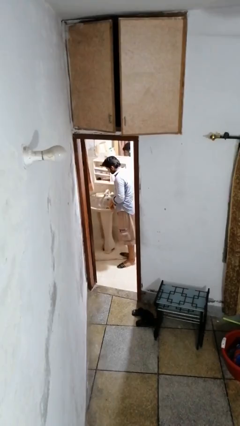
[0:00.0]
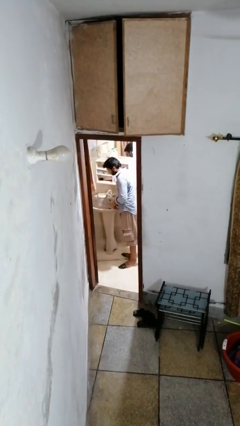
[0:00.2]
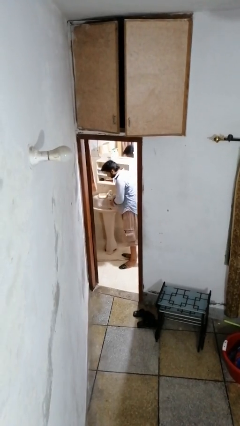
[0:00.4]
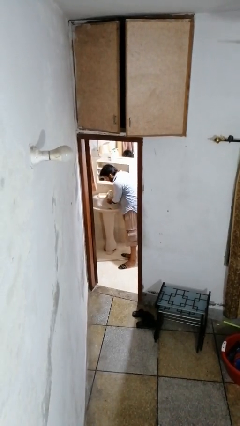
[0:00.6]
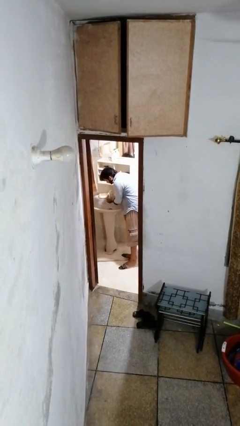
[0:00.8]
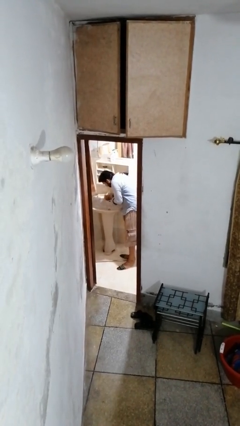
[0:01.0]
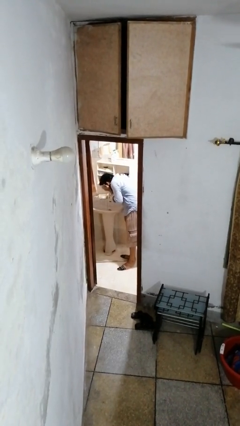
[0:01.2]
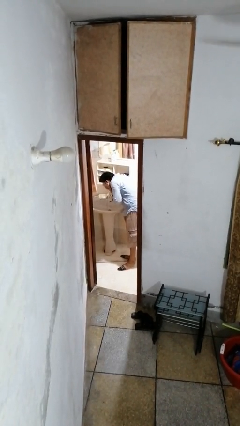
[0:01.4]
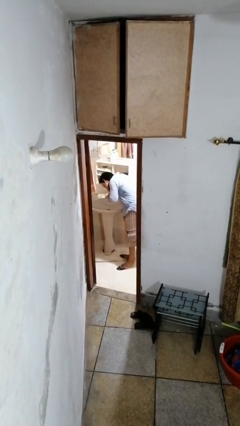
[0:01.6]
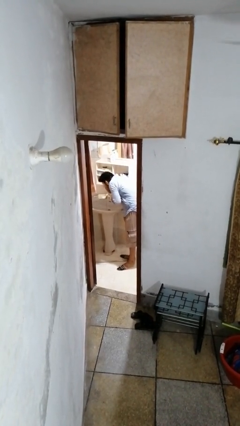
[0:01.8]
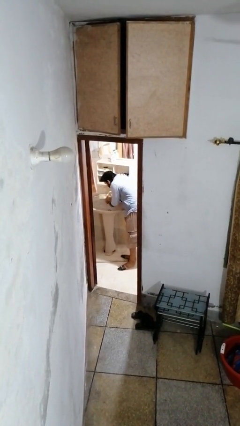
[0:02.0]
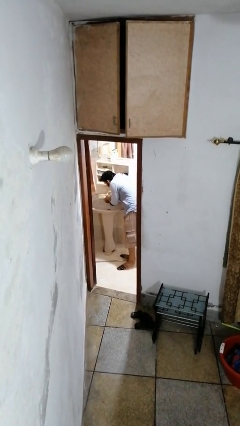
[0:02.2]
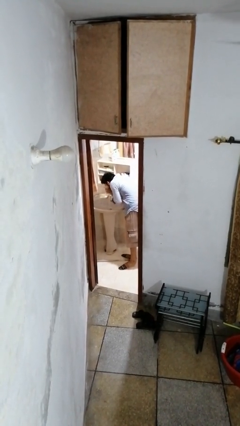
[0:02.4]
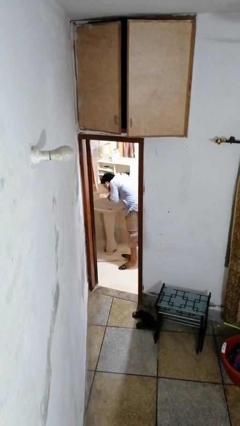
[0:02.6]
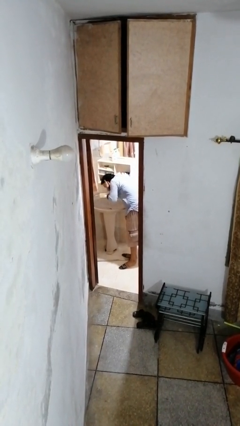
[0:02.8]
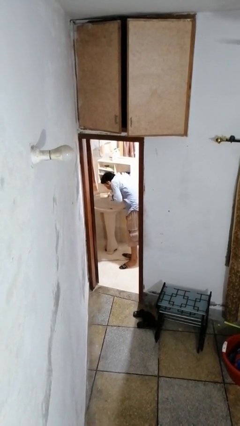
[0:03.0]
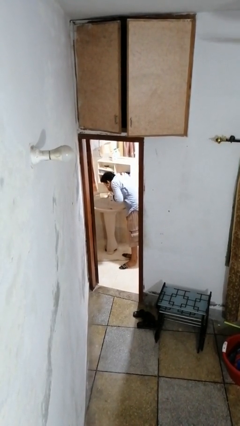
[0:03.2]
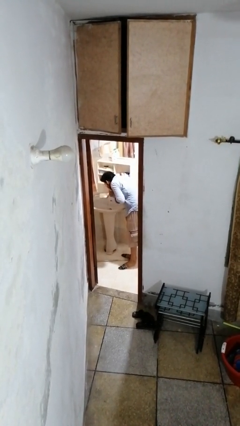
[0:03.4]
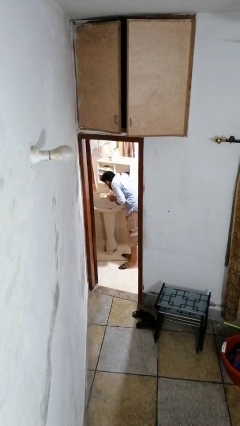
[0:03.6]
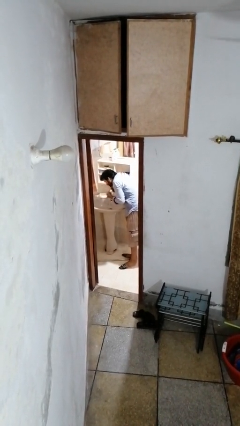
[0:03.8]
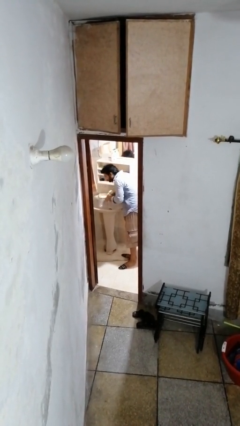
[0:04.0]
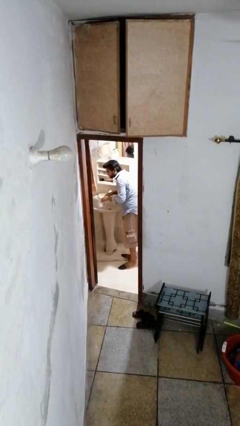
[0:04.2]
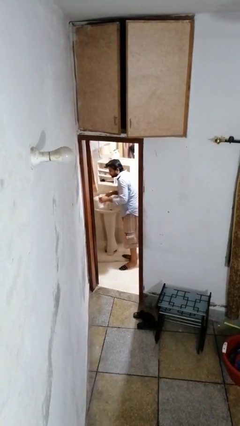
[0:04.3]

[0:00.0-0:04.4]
person washes face

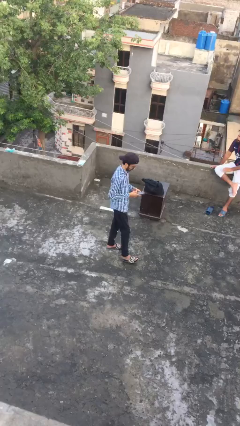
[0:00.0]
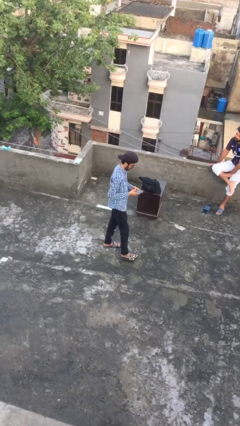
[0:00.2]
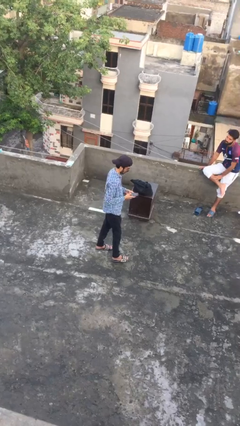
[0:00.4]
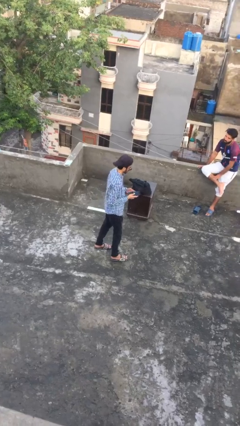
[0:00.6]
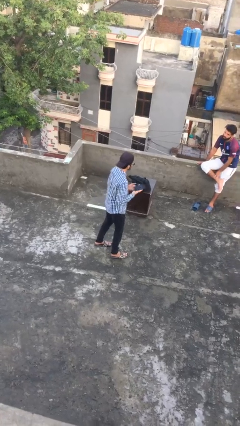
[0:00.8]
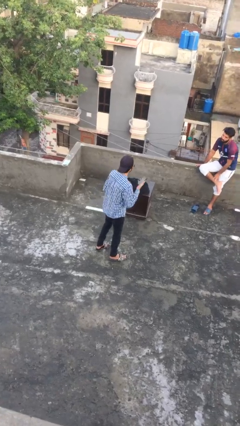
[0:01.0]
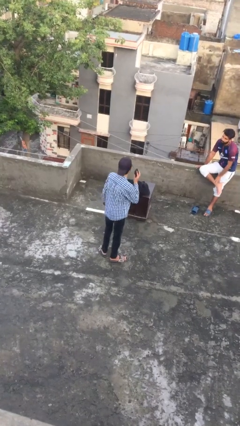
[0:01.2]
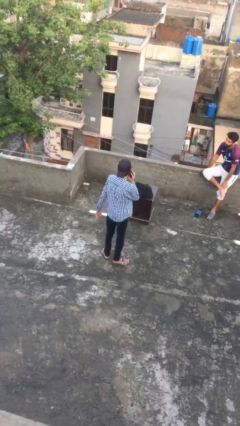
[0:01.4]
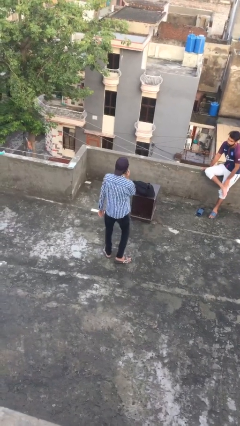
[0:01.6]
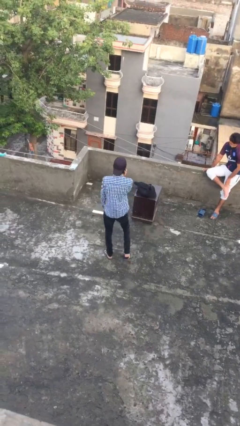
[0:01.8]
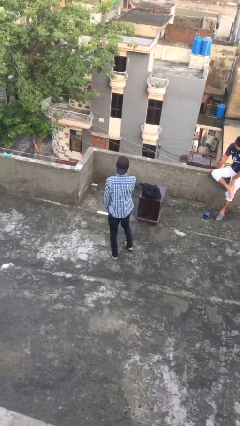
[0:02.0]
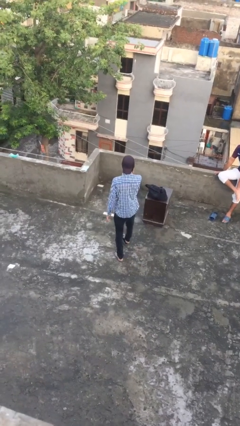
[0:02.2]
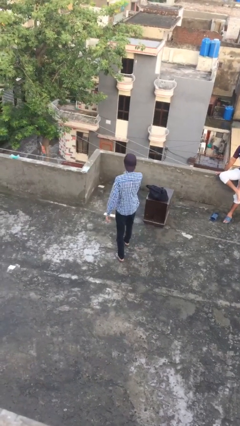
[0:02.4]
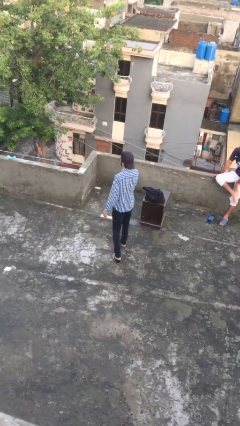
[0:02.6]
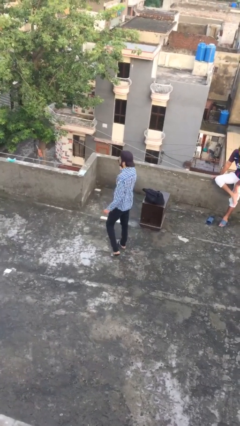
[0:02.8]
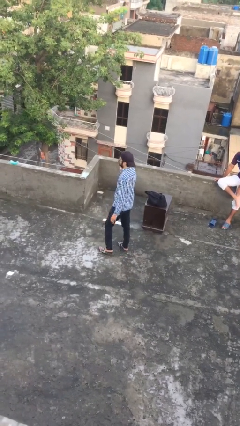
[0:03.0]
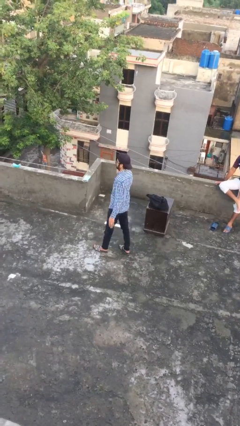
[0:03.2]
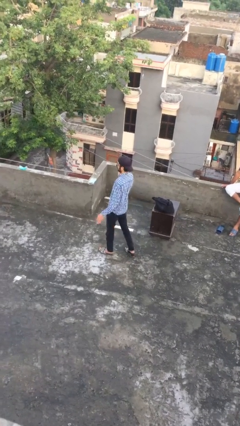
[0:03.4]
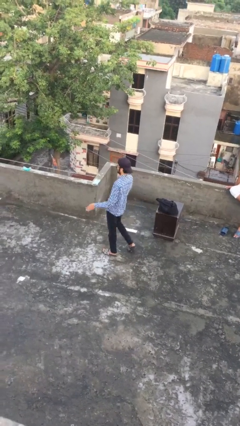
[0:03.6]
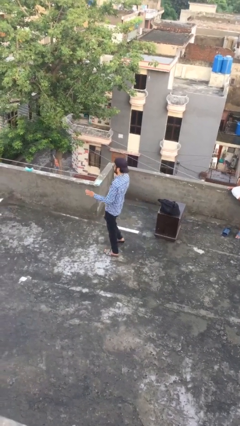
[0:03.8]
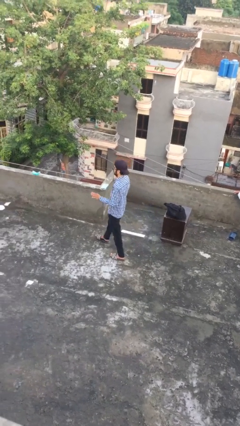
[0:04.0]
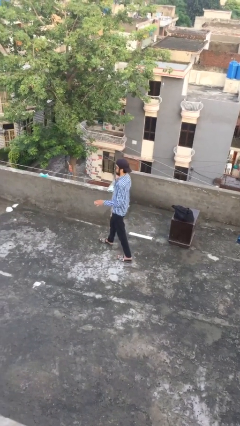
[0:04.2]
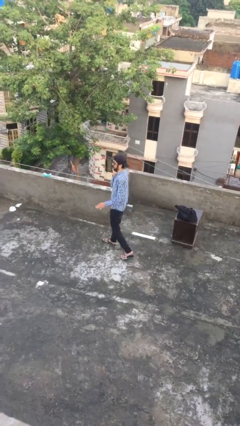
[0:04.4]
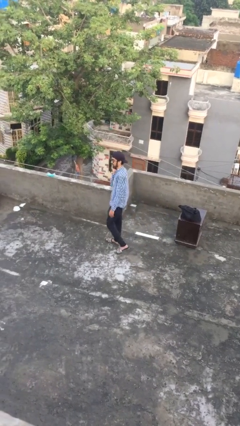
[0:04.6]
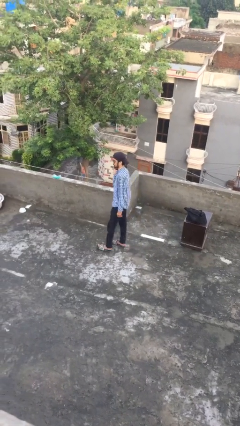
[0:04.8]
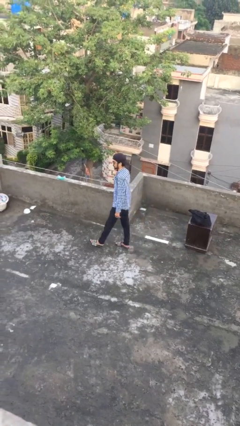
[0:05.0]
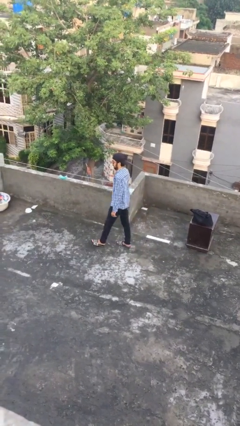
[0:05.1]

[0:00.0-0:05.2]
person talks on phone

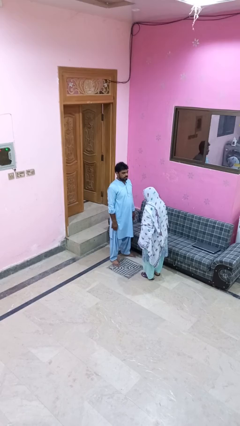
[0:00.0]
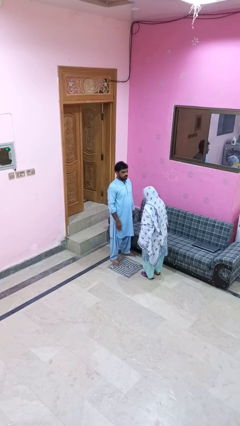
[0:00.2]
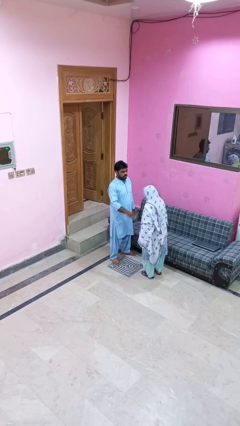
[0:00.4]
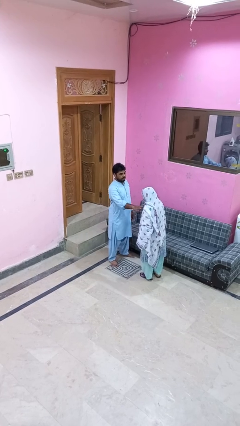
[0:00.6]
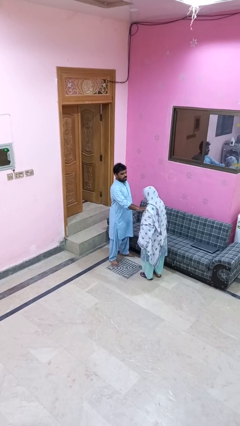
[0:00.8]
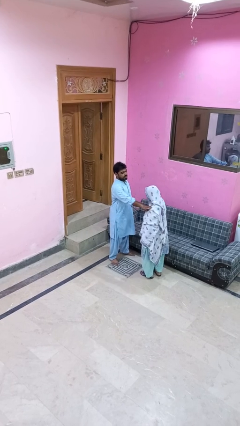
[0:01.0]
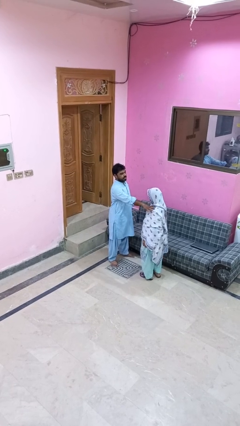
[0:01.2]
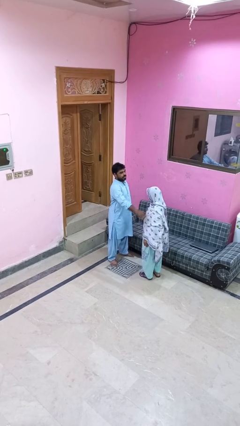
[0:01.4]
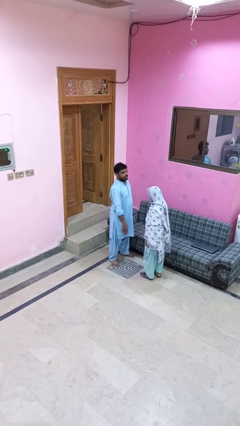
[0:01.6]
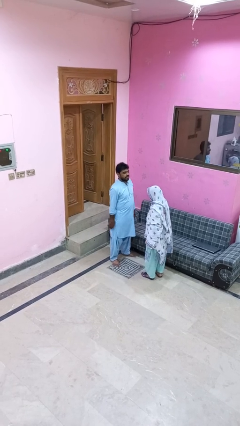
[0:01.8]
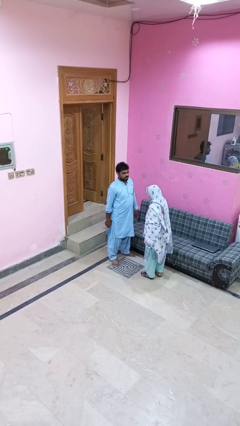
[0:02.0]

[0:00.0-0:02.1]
person shoves person

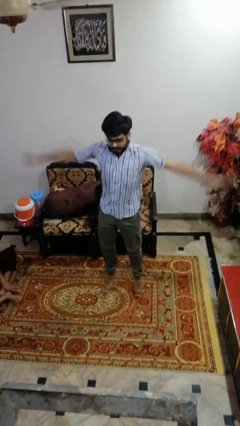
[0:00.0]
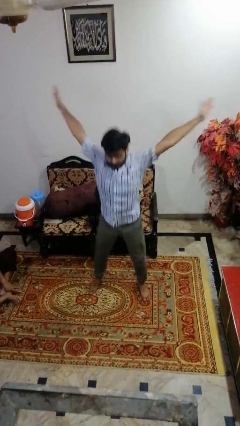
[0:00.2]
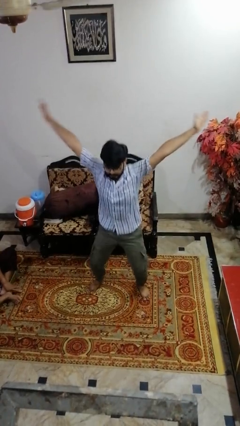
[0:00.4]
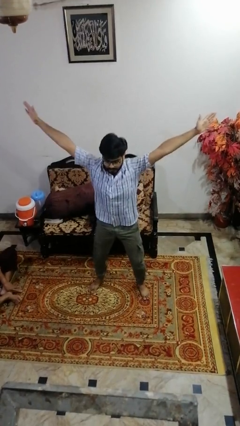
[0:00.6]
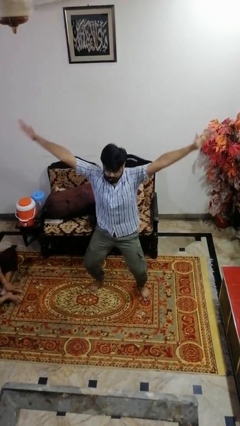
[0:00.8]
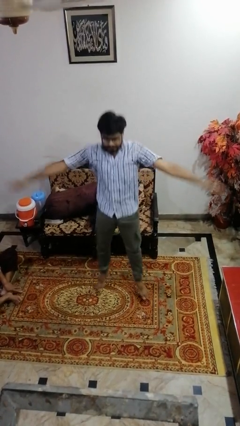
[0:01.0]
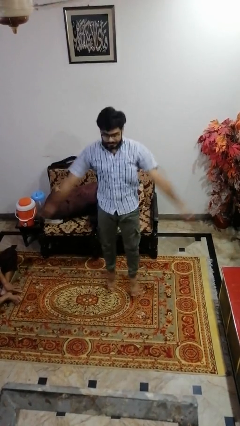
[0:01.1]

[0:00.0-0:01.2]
person exercises with jumping jacks

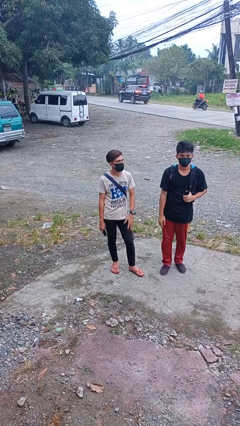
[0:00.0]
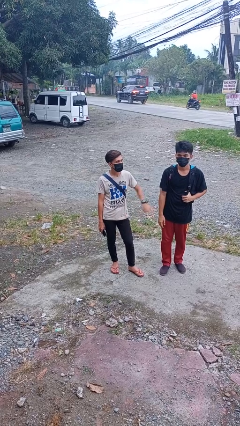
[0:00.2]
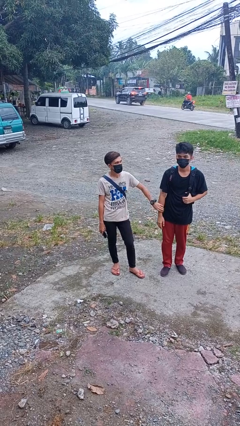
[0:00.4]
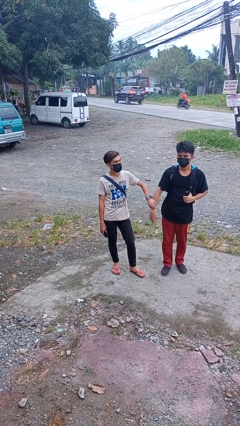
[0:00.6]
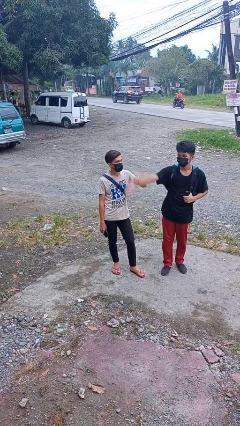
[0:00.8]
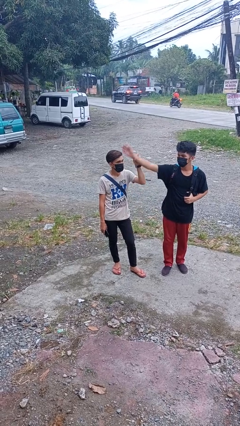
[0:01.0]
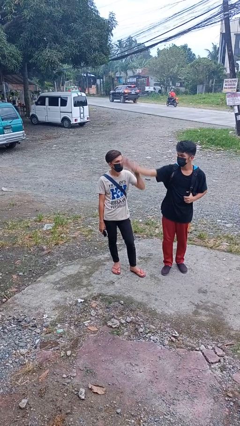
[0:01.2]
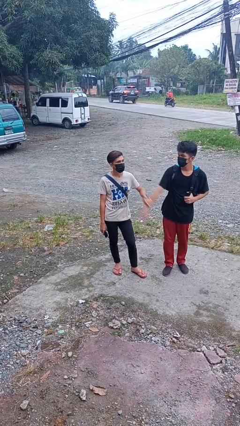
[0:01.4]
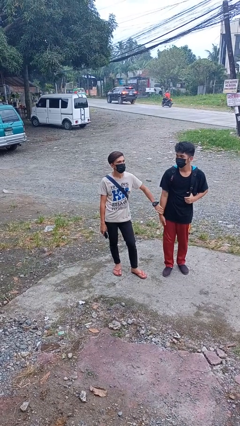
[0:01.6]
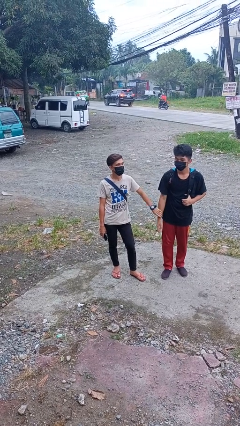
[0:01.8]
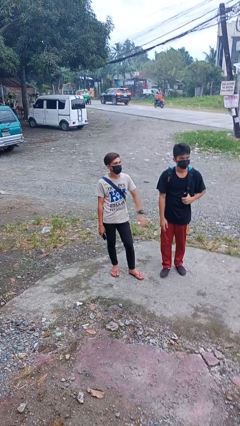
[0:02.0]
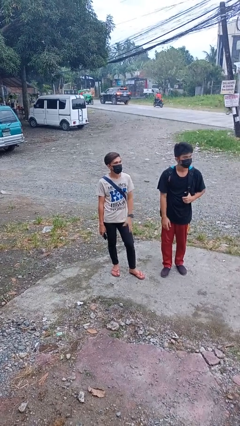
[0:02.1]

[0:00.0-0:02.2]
person grabs person by forearm

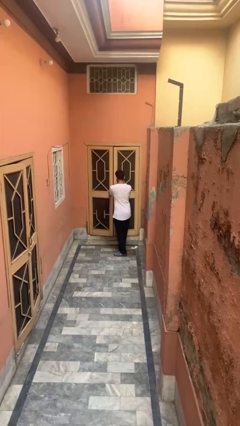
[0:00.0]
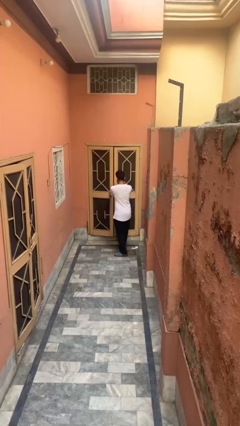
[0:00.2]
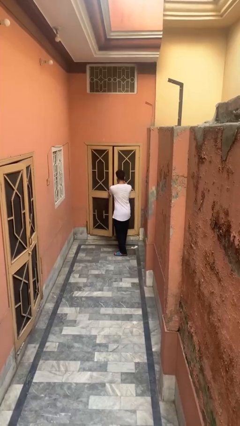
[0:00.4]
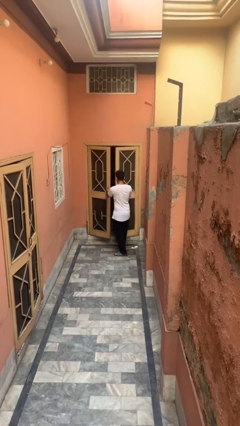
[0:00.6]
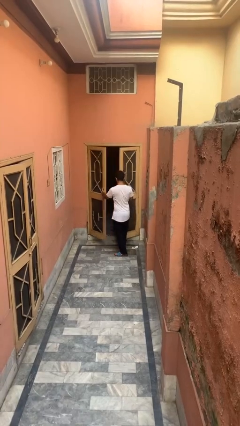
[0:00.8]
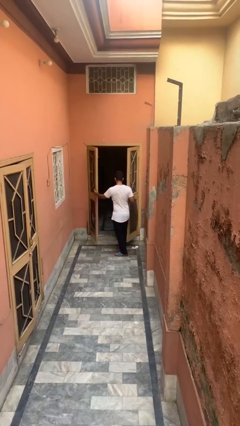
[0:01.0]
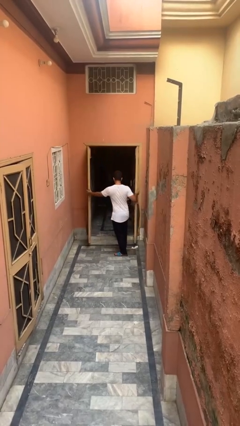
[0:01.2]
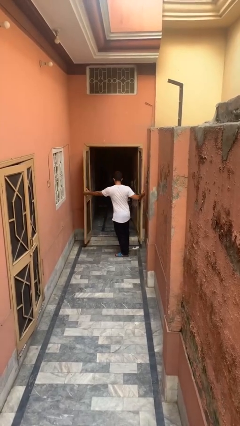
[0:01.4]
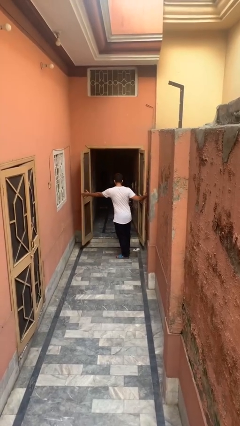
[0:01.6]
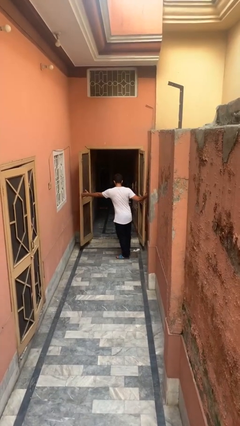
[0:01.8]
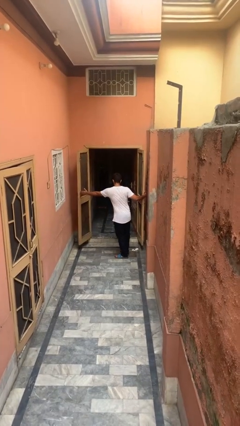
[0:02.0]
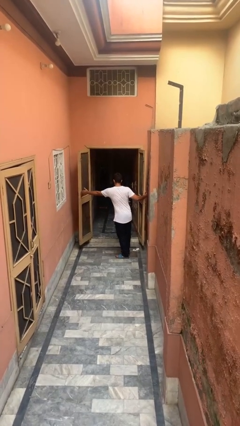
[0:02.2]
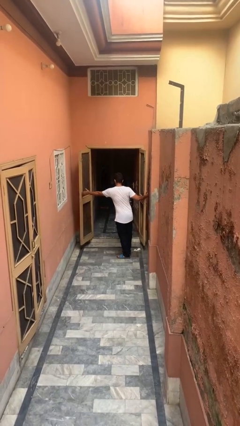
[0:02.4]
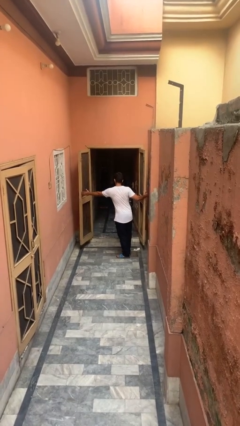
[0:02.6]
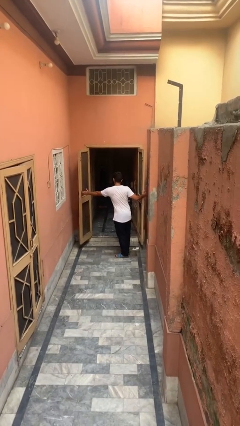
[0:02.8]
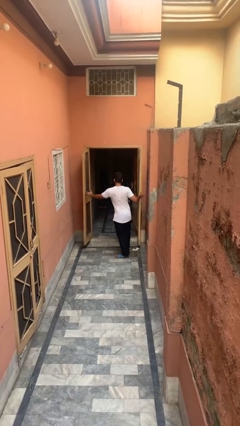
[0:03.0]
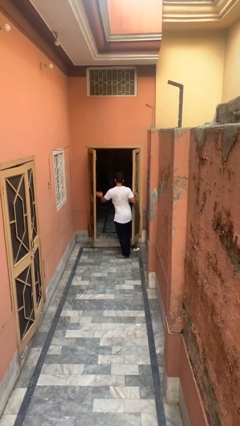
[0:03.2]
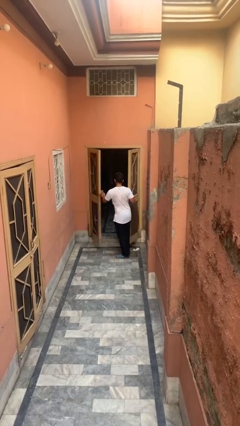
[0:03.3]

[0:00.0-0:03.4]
person opens gate
